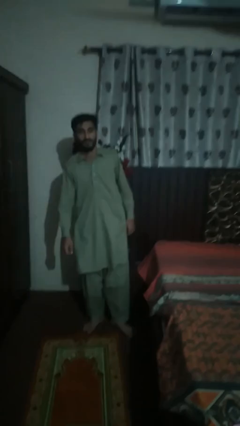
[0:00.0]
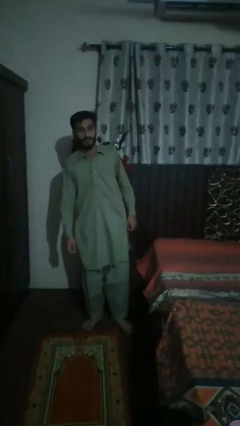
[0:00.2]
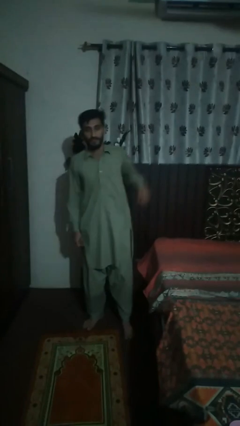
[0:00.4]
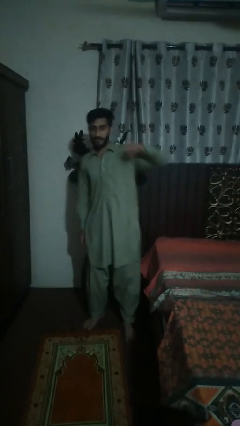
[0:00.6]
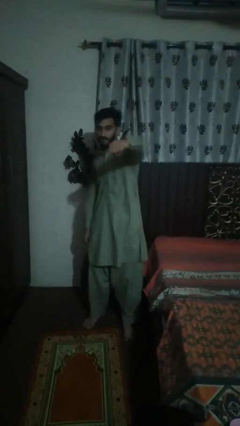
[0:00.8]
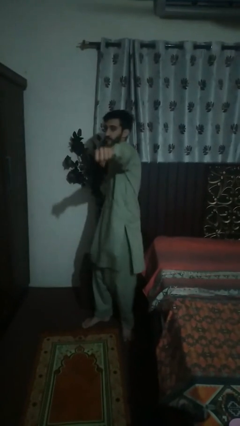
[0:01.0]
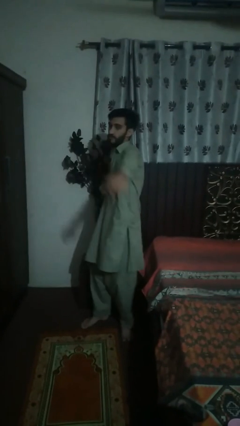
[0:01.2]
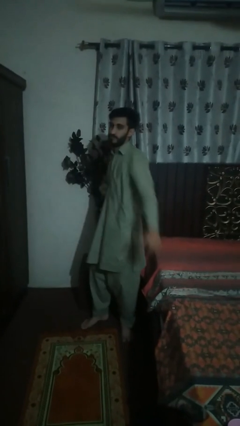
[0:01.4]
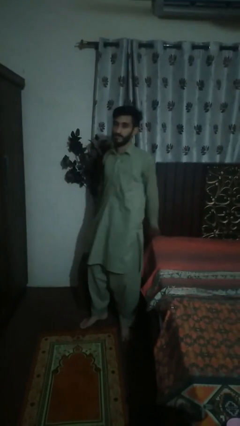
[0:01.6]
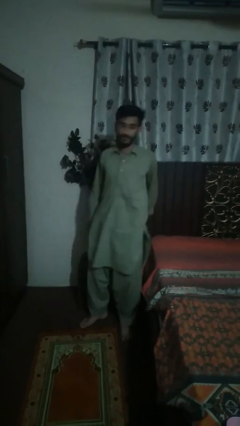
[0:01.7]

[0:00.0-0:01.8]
person punches

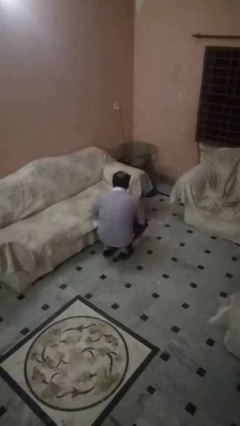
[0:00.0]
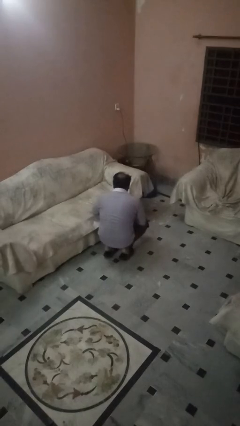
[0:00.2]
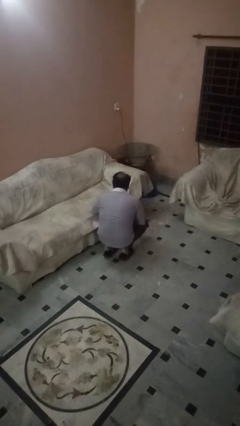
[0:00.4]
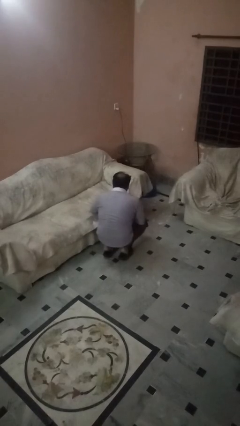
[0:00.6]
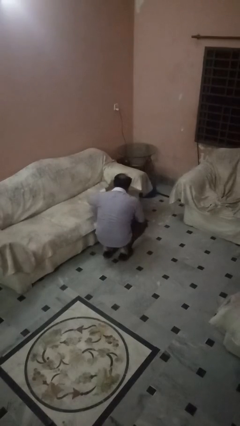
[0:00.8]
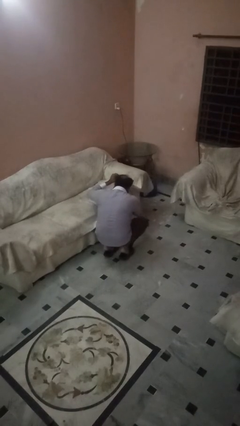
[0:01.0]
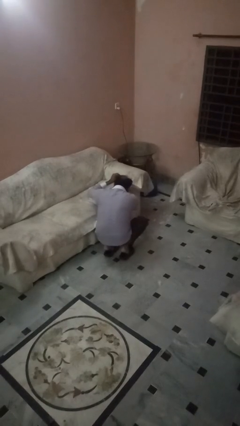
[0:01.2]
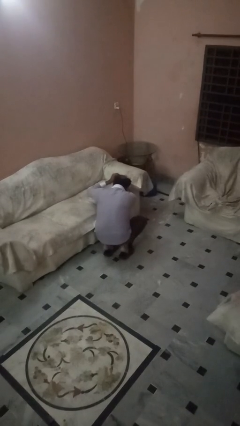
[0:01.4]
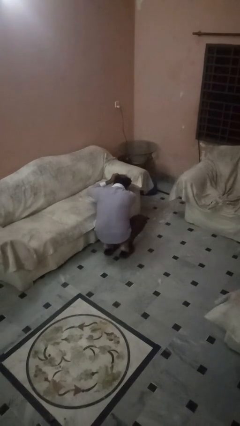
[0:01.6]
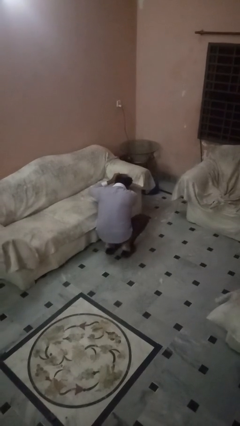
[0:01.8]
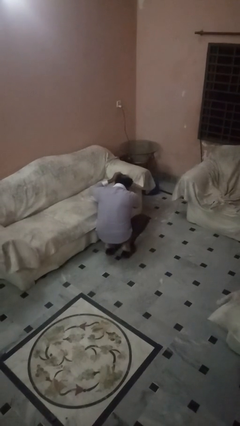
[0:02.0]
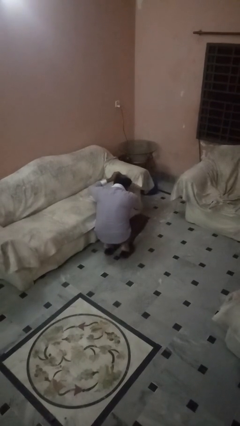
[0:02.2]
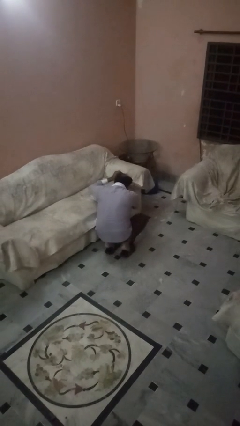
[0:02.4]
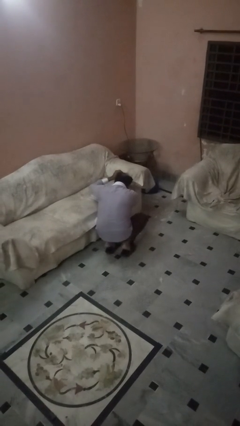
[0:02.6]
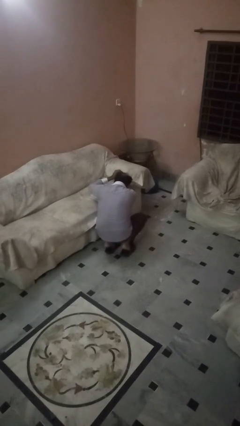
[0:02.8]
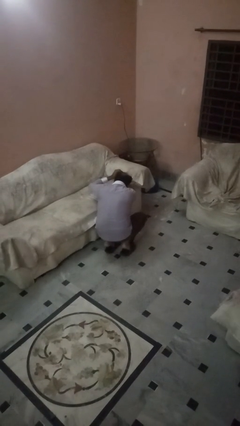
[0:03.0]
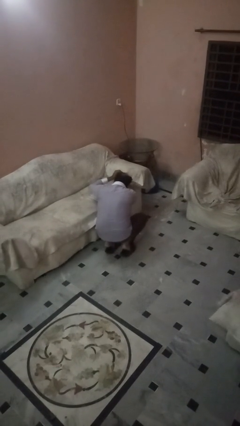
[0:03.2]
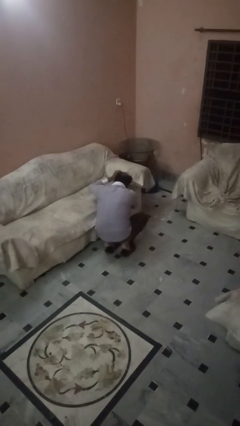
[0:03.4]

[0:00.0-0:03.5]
person searches in couch

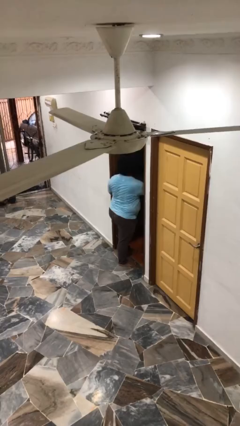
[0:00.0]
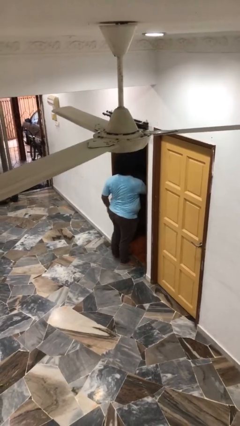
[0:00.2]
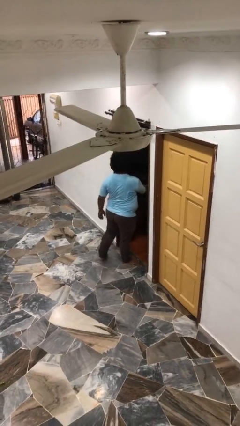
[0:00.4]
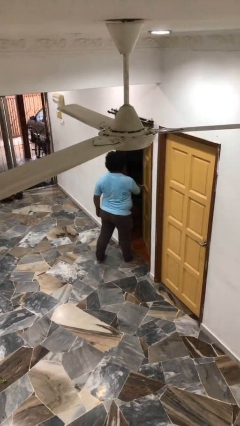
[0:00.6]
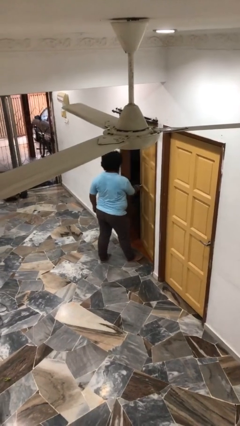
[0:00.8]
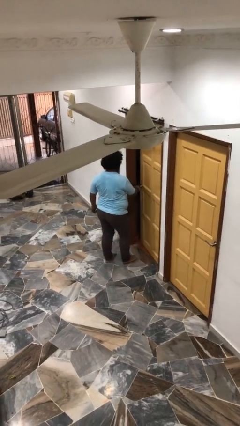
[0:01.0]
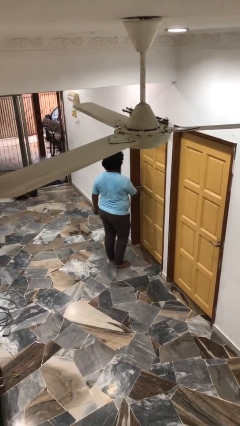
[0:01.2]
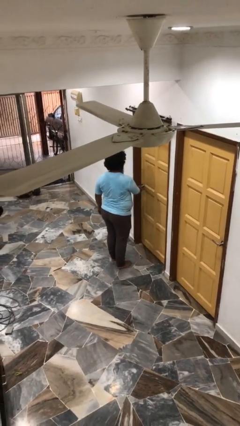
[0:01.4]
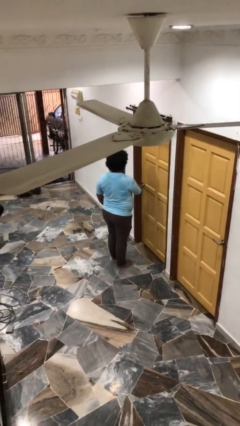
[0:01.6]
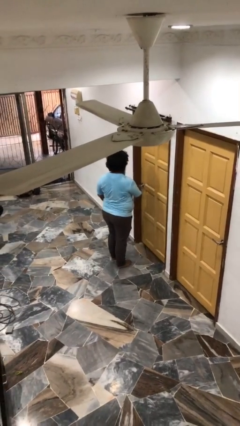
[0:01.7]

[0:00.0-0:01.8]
person closes facility door

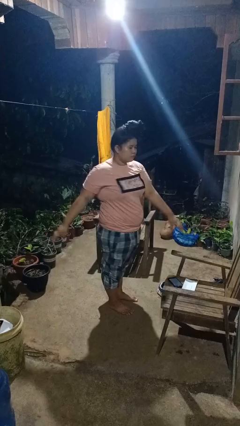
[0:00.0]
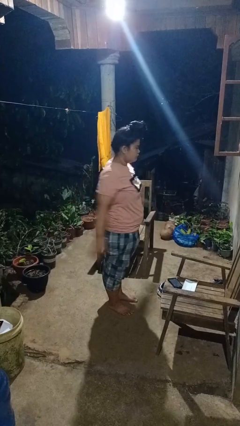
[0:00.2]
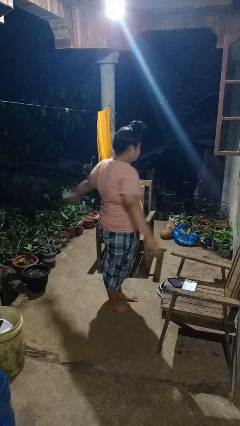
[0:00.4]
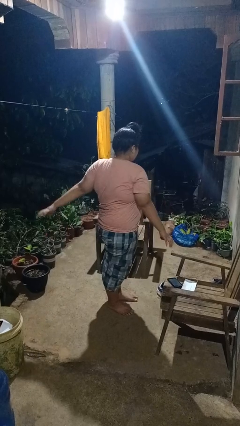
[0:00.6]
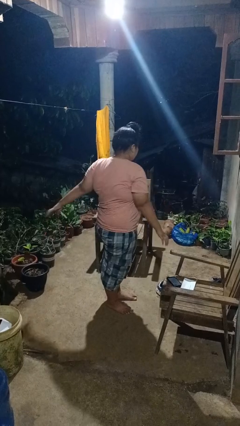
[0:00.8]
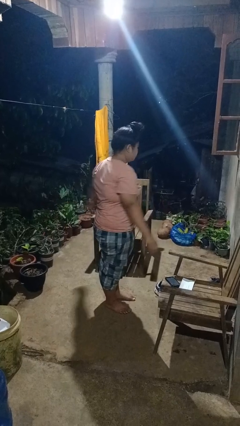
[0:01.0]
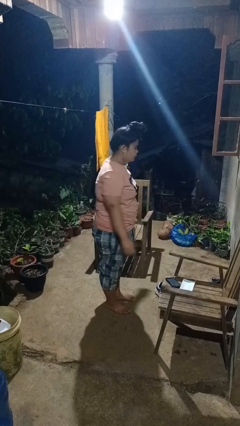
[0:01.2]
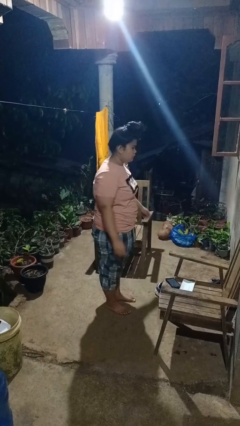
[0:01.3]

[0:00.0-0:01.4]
person stretches arms to side

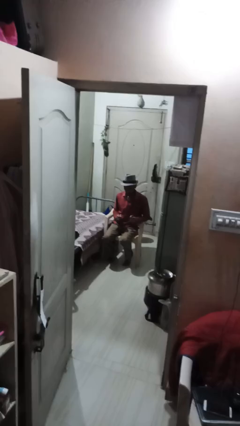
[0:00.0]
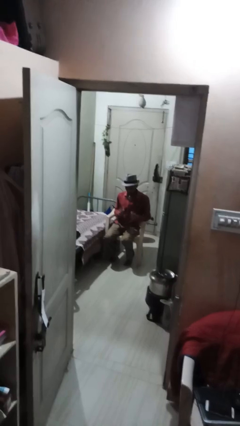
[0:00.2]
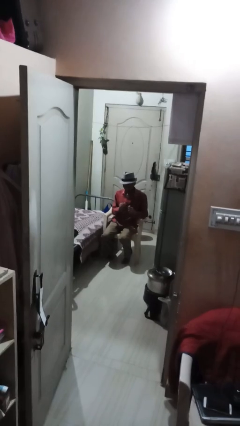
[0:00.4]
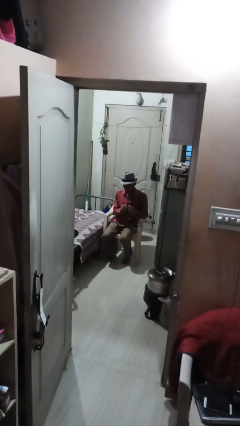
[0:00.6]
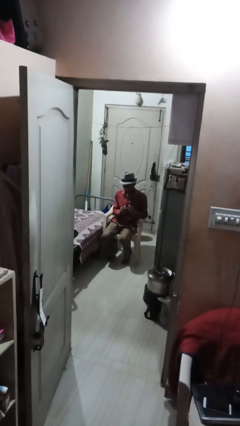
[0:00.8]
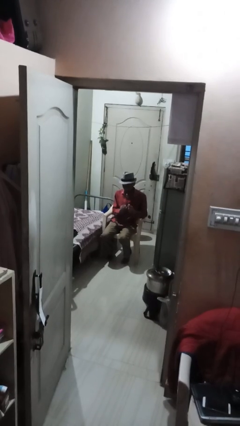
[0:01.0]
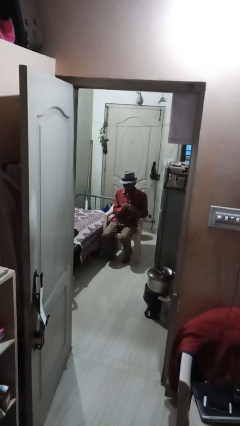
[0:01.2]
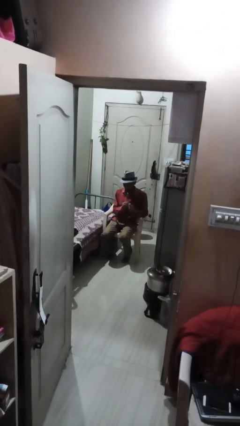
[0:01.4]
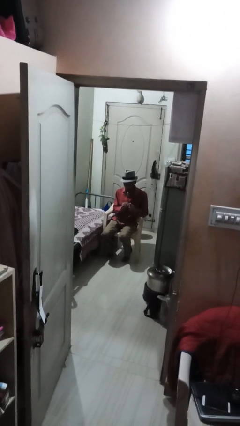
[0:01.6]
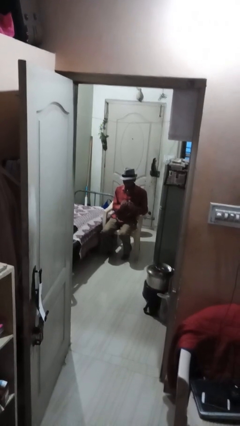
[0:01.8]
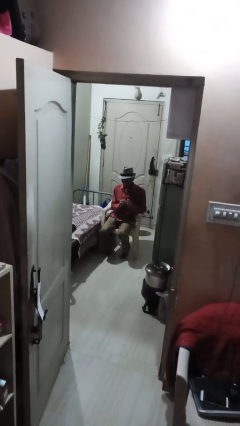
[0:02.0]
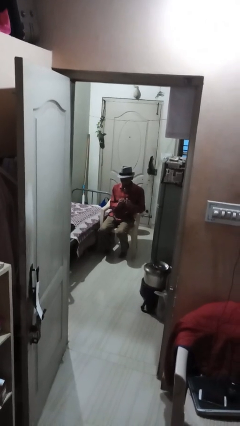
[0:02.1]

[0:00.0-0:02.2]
person files fingernails

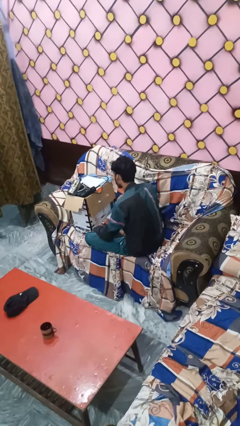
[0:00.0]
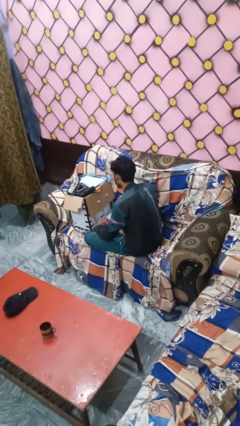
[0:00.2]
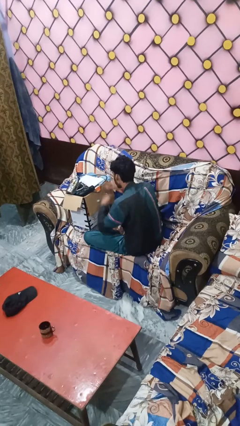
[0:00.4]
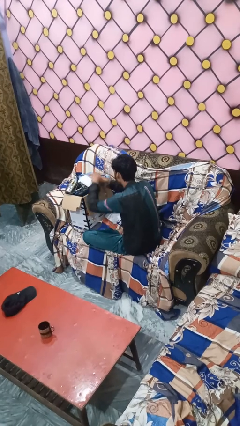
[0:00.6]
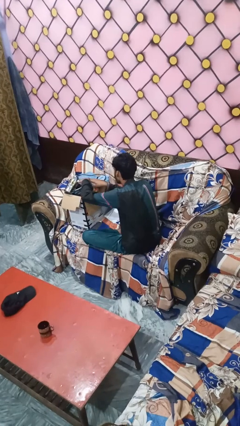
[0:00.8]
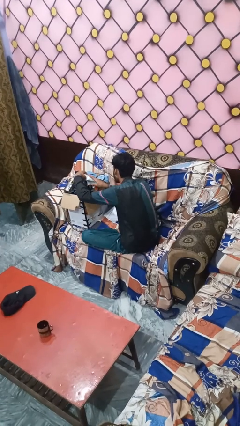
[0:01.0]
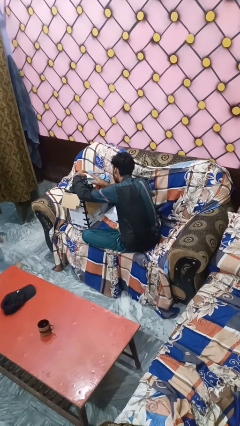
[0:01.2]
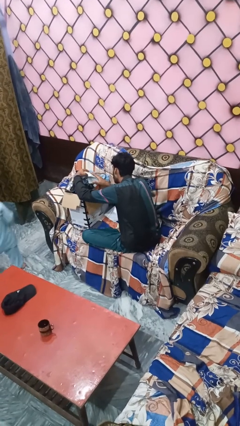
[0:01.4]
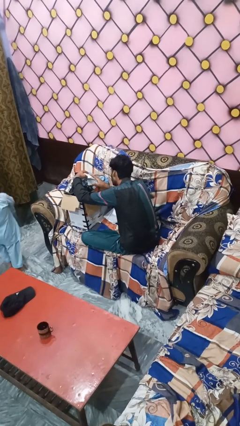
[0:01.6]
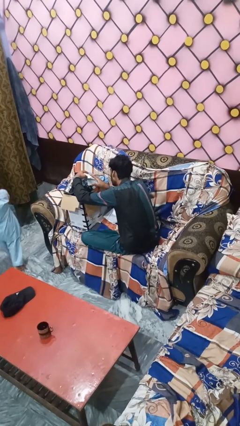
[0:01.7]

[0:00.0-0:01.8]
person searches in box

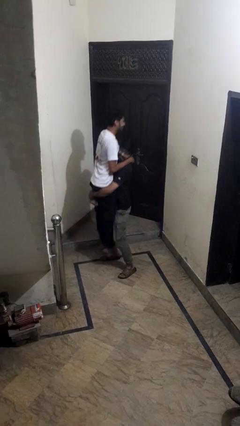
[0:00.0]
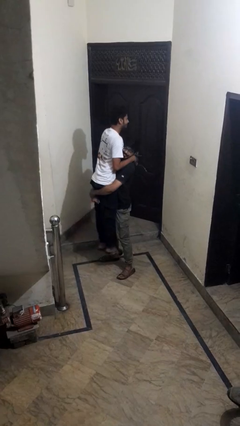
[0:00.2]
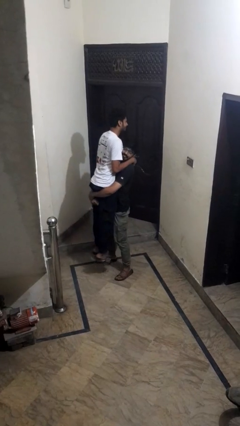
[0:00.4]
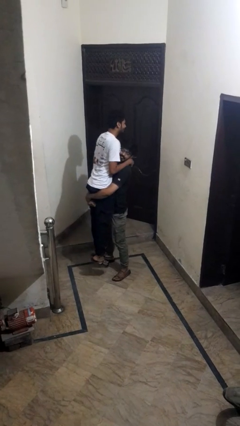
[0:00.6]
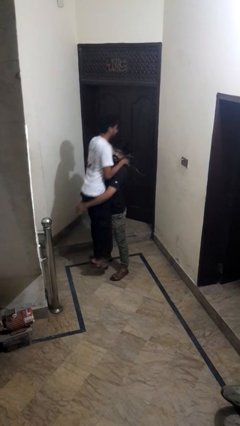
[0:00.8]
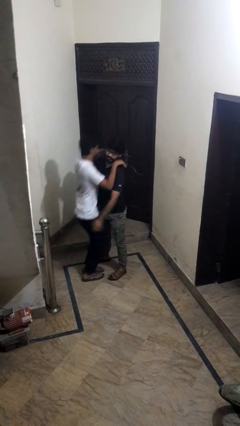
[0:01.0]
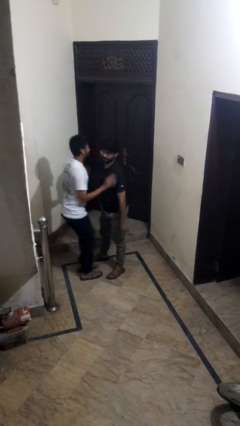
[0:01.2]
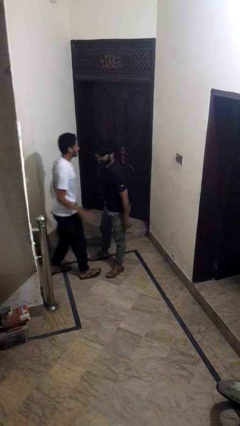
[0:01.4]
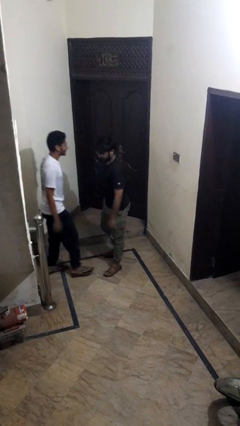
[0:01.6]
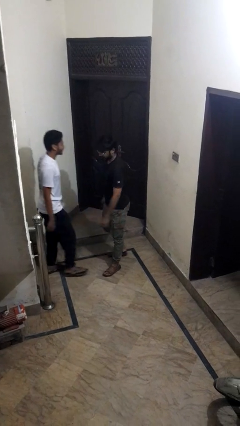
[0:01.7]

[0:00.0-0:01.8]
person takes off hat

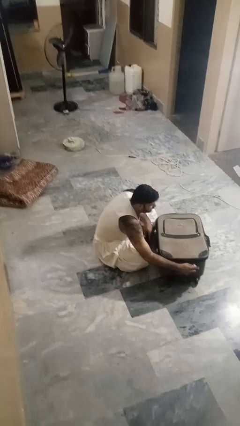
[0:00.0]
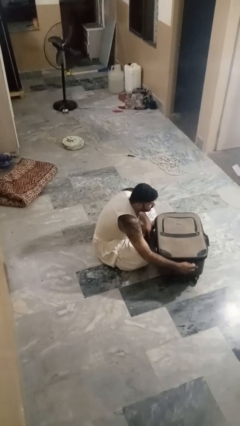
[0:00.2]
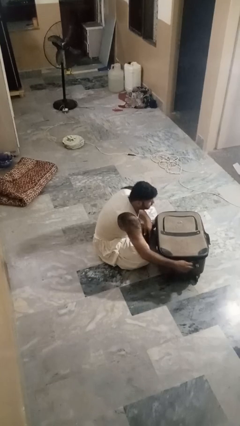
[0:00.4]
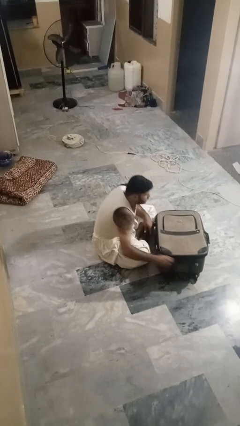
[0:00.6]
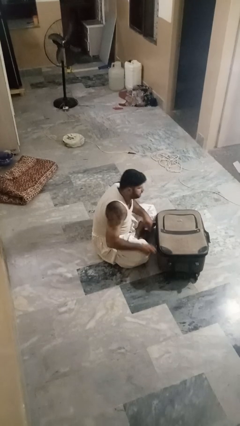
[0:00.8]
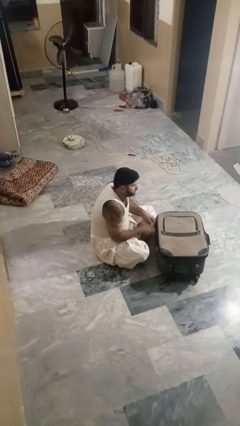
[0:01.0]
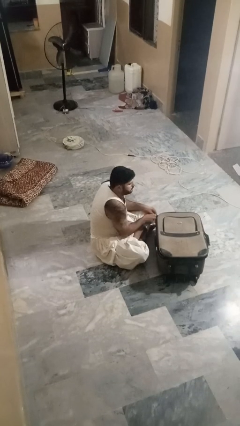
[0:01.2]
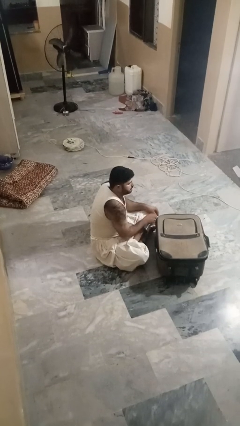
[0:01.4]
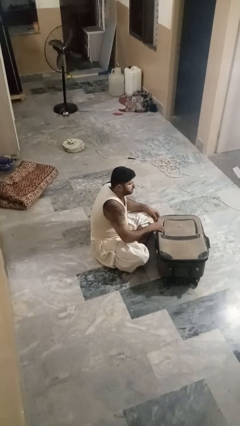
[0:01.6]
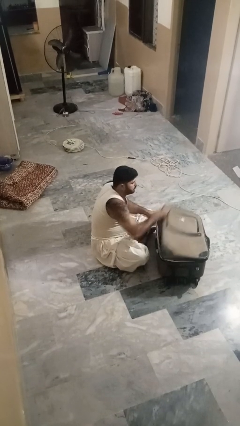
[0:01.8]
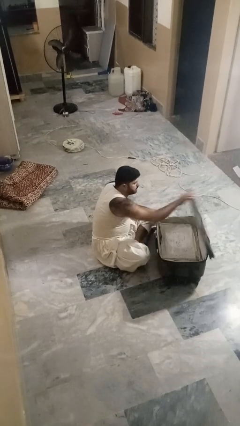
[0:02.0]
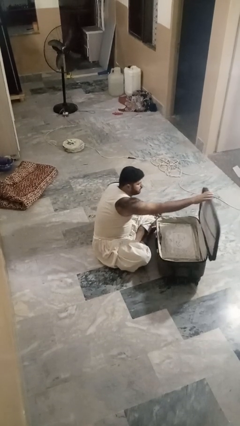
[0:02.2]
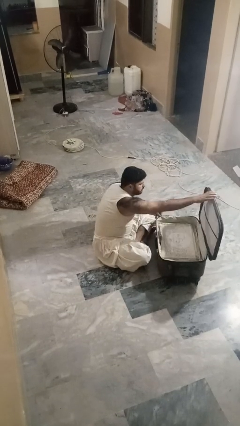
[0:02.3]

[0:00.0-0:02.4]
person opens suitcase

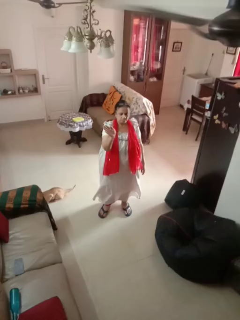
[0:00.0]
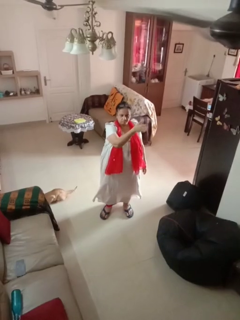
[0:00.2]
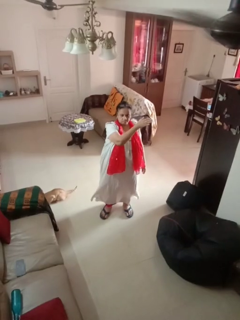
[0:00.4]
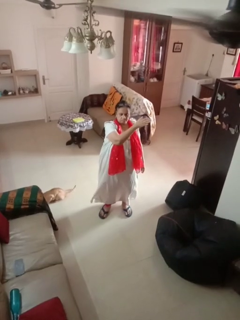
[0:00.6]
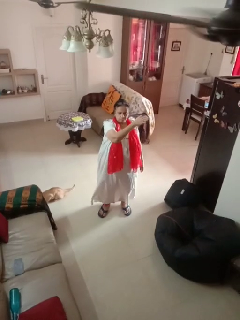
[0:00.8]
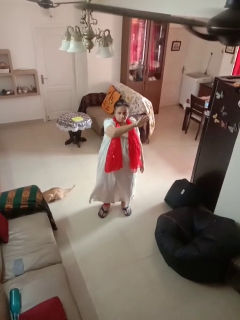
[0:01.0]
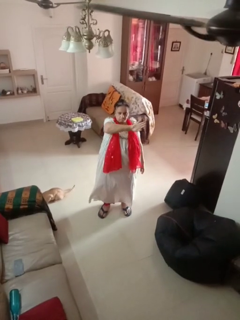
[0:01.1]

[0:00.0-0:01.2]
person gestures swipe left
